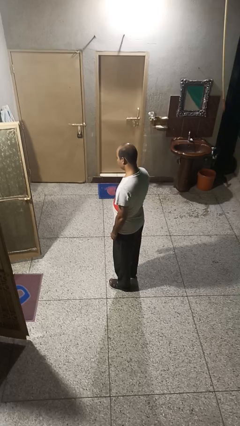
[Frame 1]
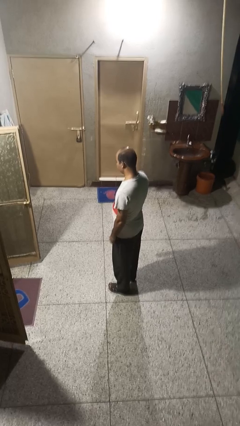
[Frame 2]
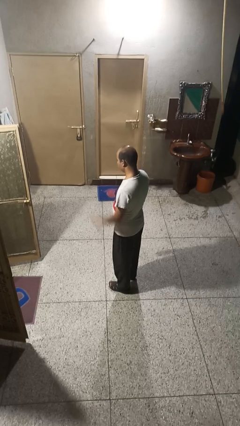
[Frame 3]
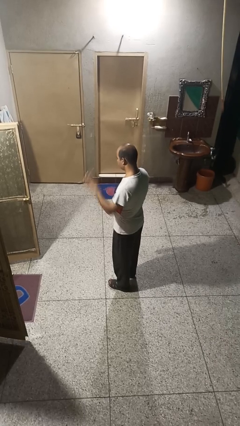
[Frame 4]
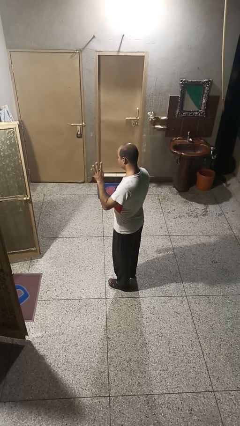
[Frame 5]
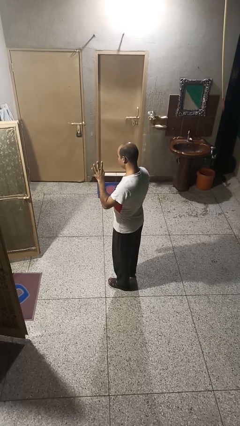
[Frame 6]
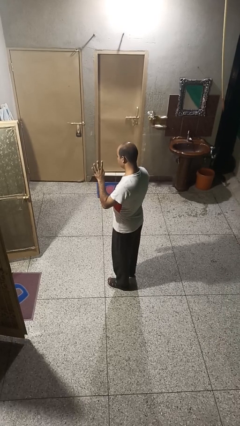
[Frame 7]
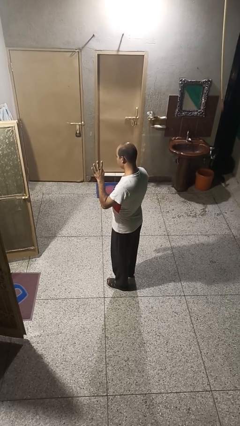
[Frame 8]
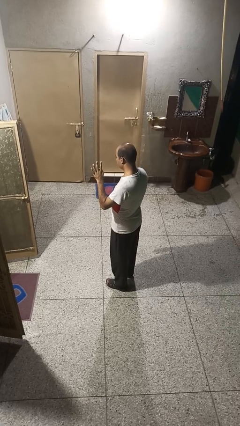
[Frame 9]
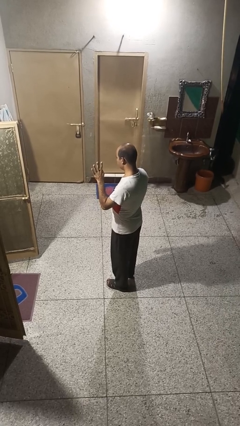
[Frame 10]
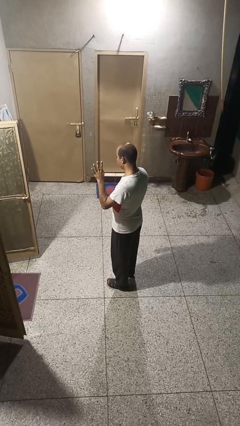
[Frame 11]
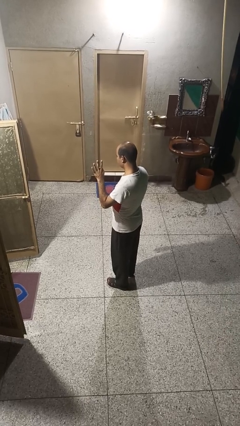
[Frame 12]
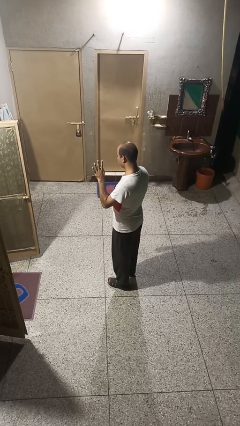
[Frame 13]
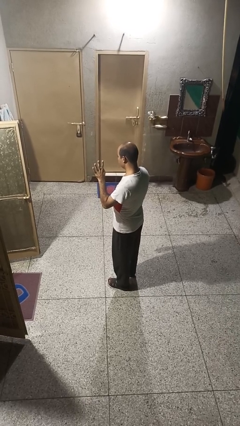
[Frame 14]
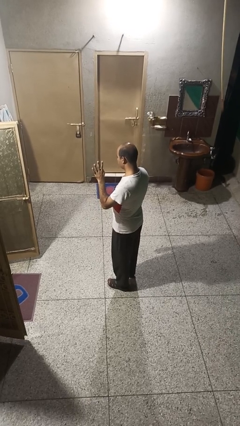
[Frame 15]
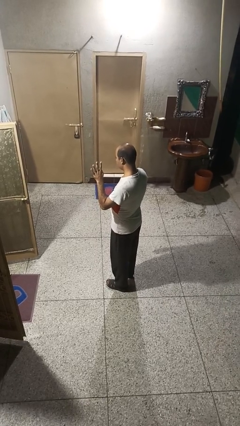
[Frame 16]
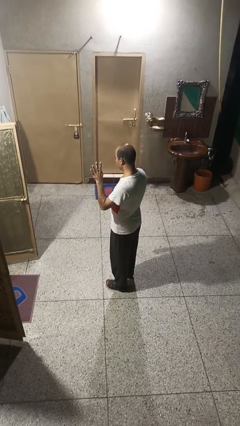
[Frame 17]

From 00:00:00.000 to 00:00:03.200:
person gestures number four

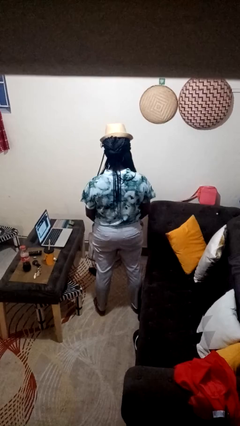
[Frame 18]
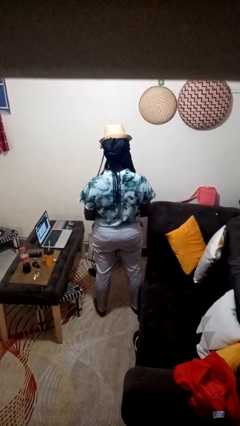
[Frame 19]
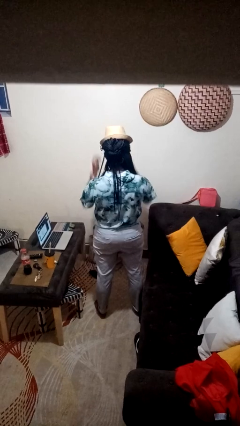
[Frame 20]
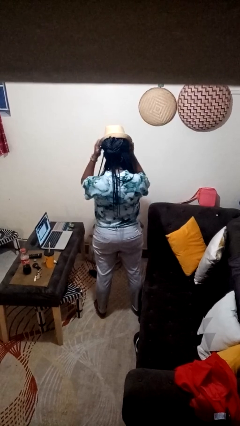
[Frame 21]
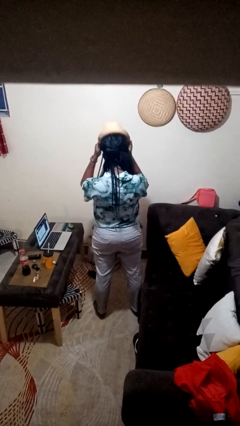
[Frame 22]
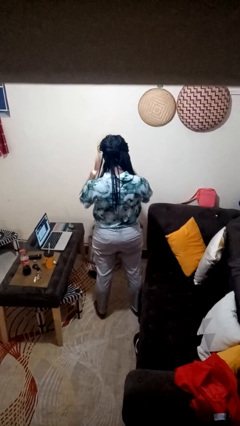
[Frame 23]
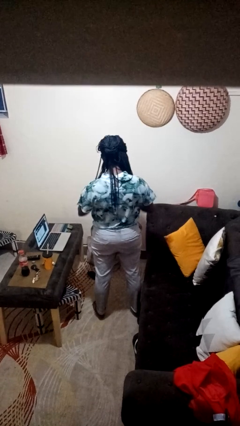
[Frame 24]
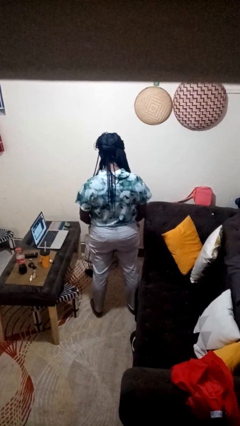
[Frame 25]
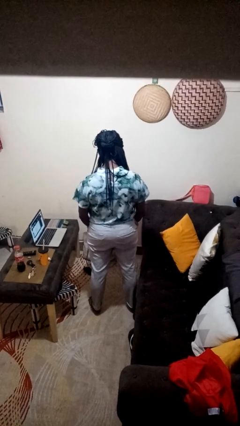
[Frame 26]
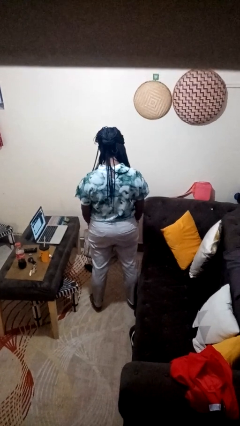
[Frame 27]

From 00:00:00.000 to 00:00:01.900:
person takes off hat

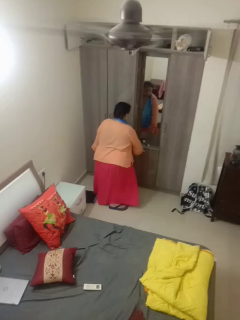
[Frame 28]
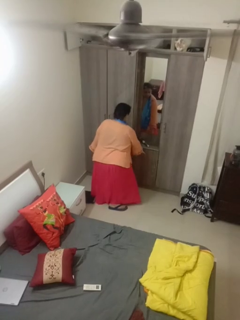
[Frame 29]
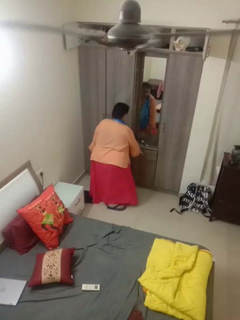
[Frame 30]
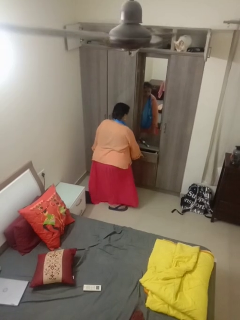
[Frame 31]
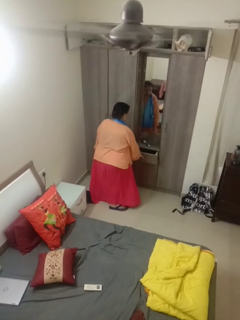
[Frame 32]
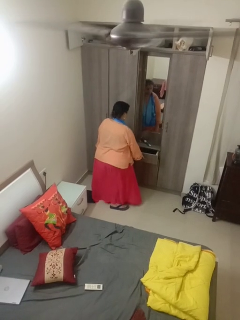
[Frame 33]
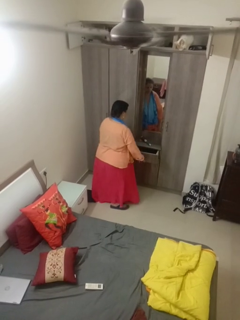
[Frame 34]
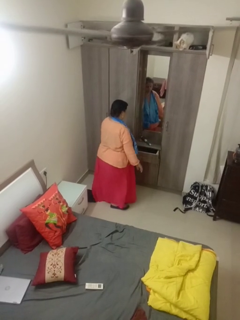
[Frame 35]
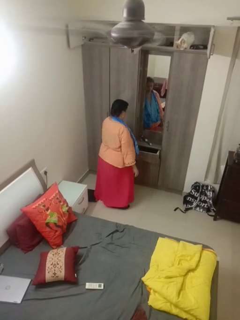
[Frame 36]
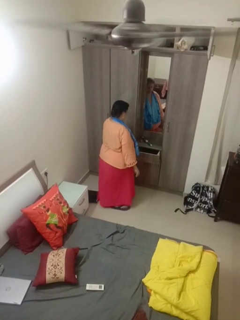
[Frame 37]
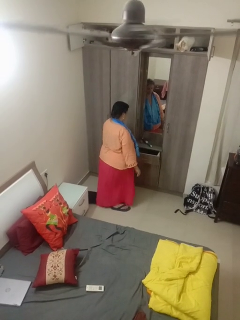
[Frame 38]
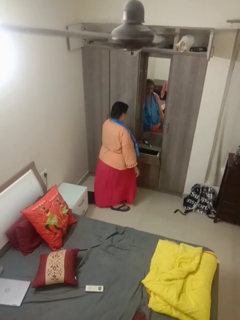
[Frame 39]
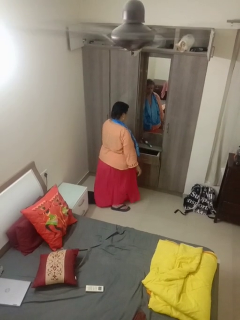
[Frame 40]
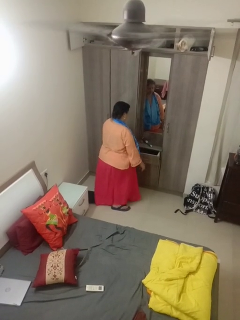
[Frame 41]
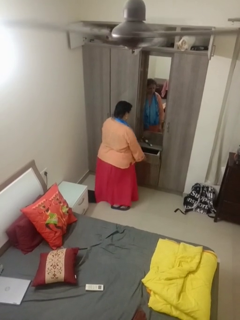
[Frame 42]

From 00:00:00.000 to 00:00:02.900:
person opens dresser drawer

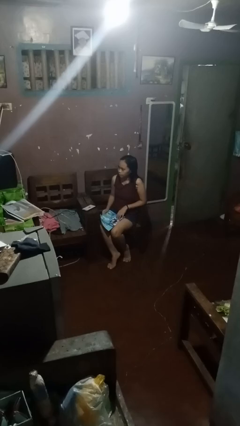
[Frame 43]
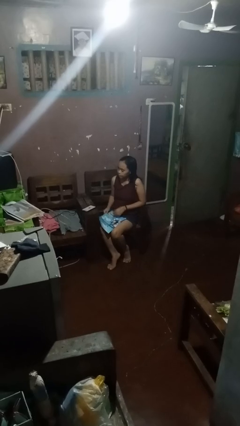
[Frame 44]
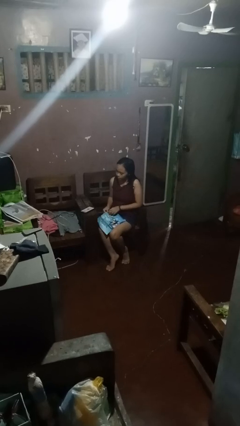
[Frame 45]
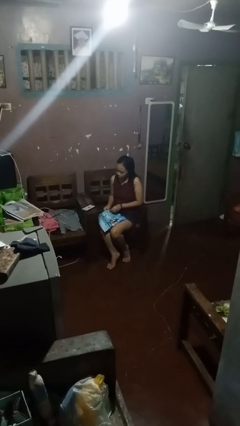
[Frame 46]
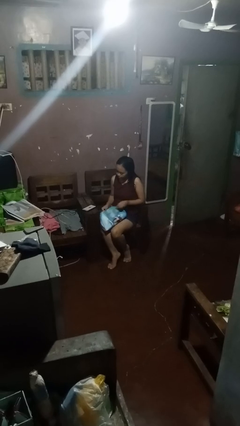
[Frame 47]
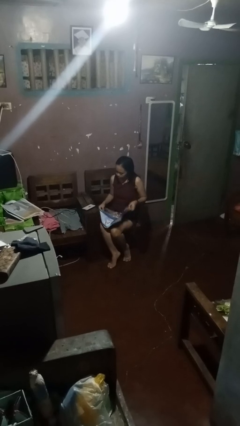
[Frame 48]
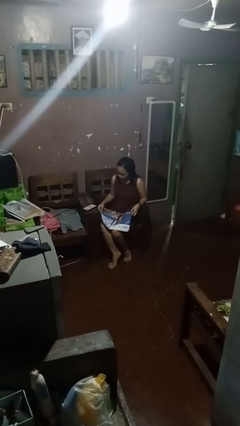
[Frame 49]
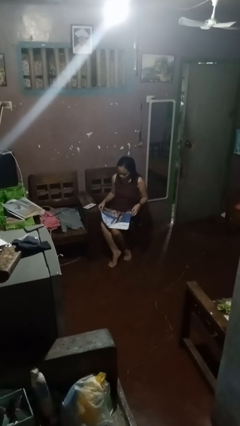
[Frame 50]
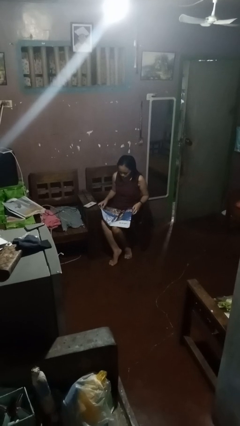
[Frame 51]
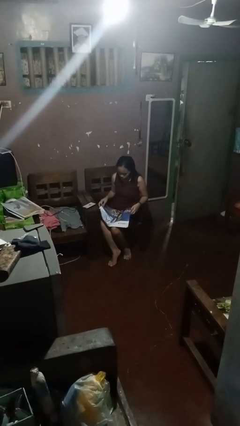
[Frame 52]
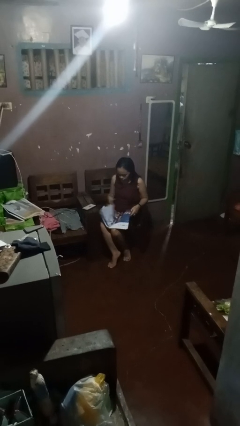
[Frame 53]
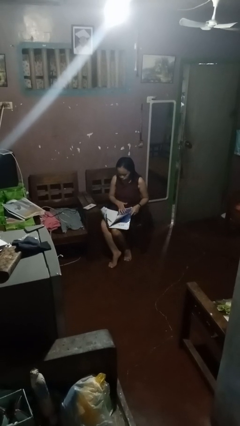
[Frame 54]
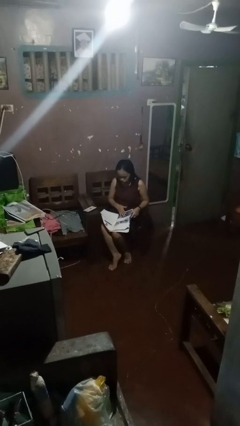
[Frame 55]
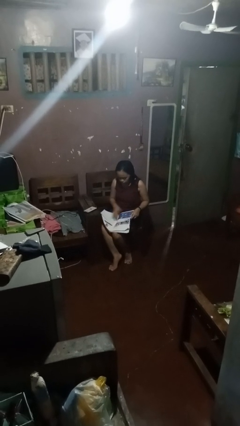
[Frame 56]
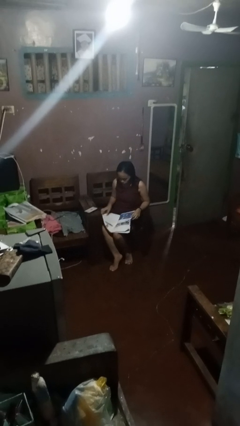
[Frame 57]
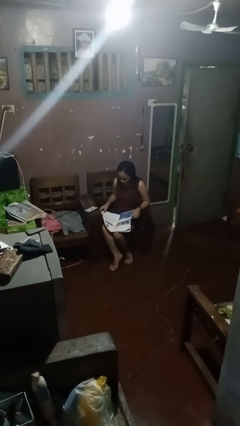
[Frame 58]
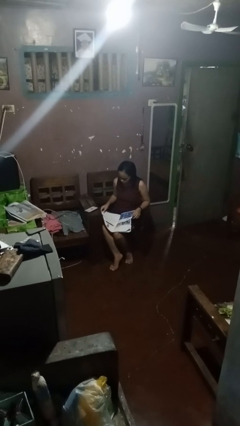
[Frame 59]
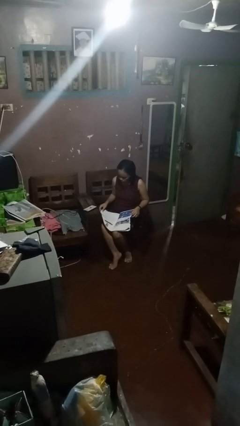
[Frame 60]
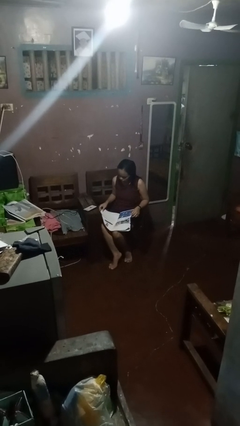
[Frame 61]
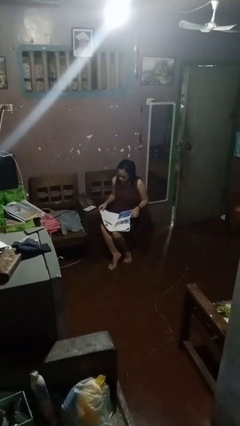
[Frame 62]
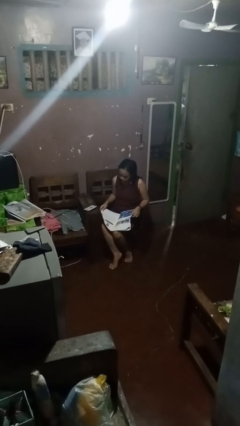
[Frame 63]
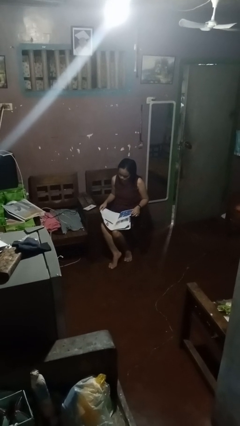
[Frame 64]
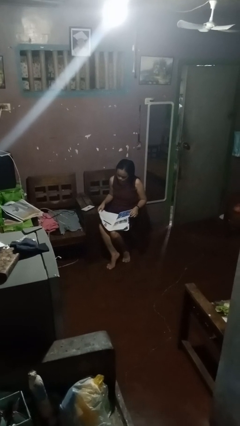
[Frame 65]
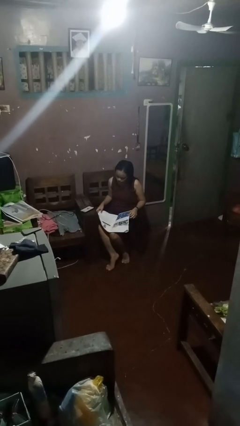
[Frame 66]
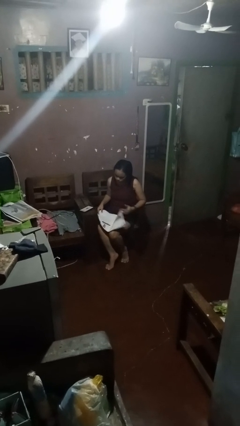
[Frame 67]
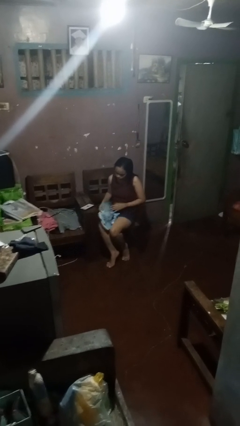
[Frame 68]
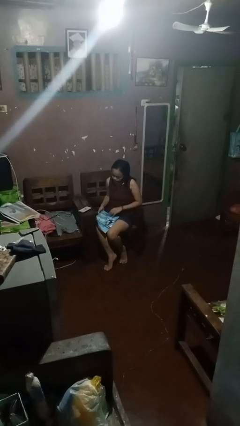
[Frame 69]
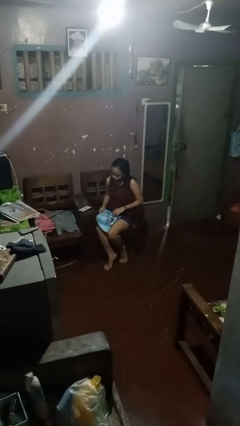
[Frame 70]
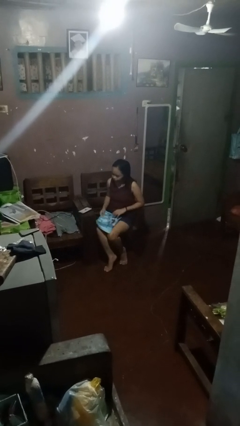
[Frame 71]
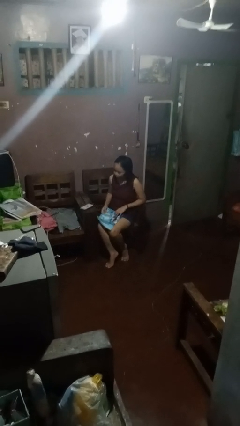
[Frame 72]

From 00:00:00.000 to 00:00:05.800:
person reads magazine

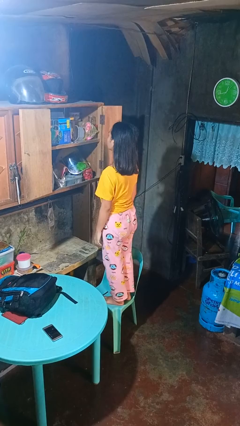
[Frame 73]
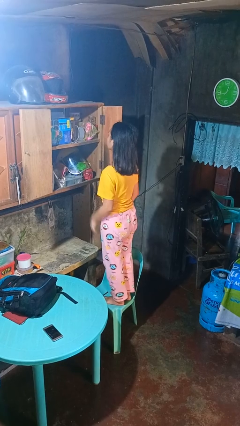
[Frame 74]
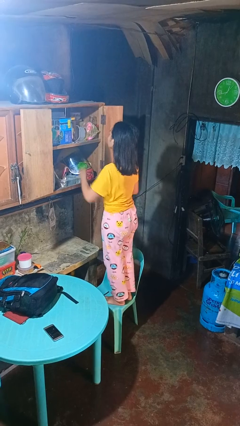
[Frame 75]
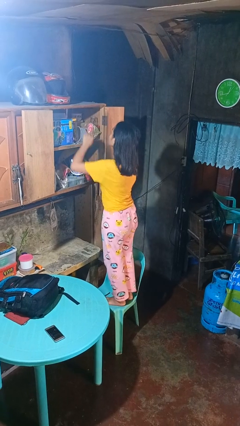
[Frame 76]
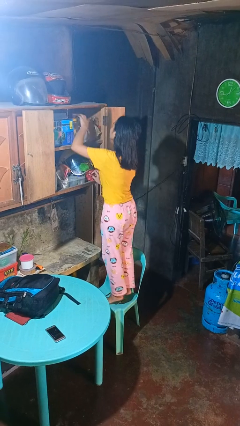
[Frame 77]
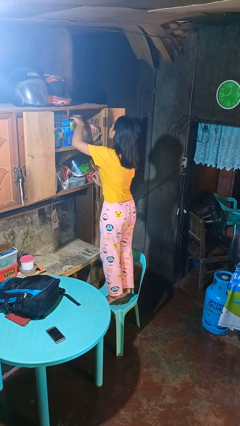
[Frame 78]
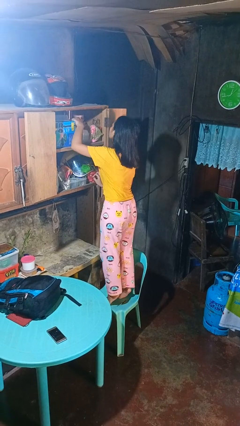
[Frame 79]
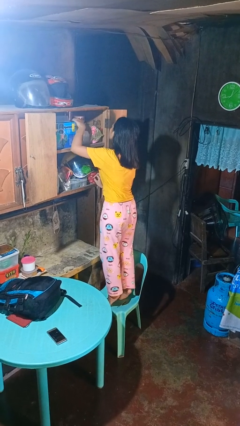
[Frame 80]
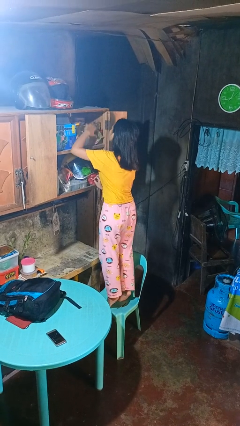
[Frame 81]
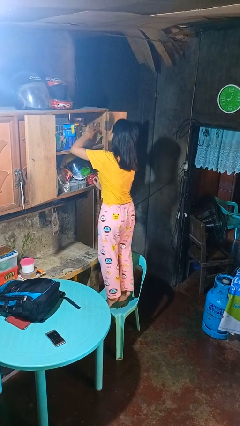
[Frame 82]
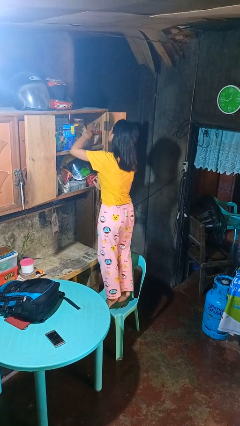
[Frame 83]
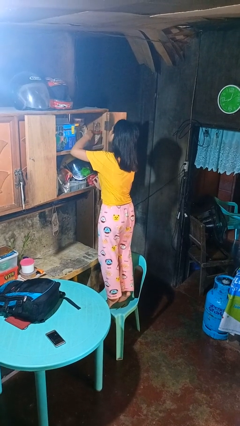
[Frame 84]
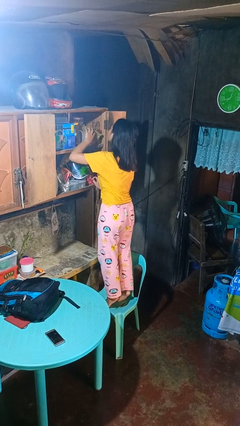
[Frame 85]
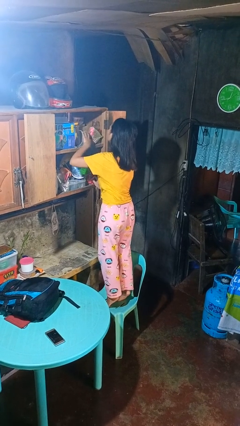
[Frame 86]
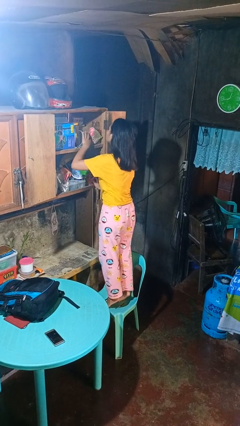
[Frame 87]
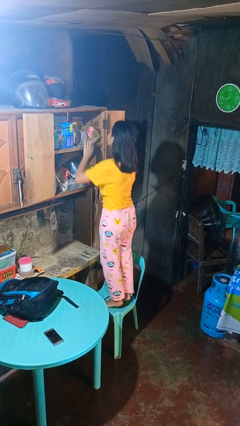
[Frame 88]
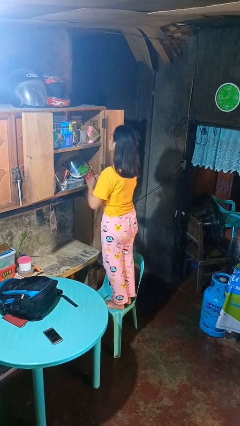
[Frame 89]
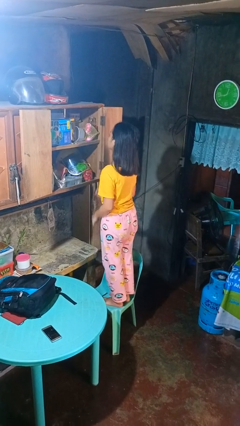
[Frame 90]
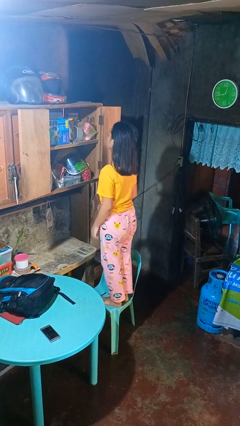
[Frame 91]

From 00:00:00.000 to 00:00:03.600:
person searches in cabinet

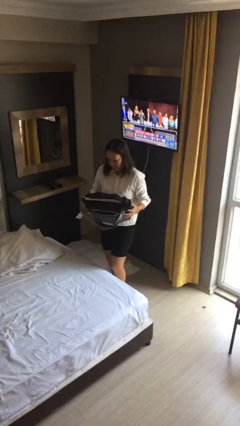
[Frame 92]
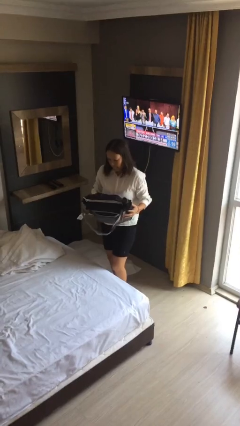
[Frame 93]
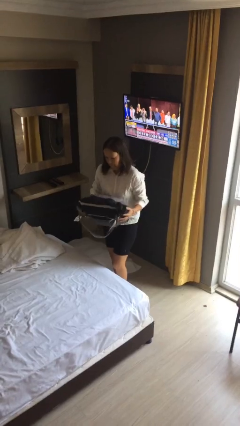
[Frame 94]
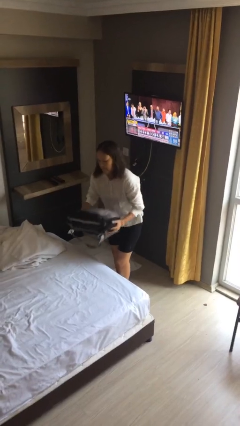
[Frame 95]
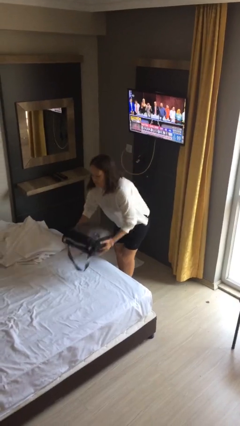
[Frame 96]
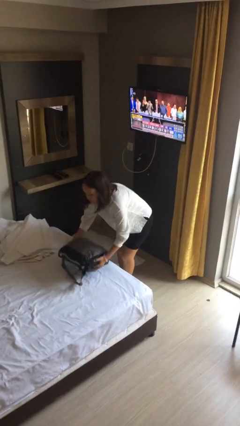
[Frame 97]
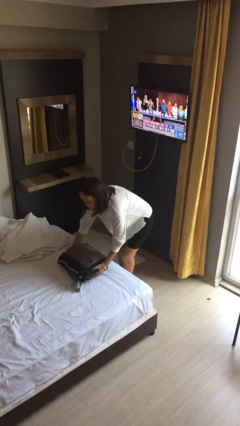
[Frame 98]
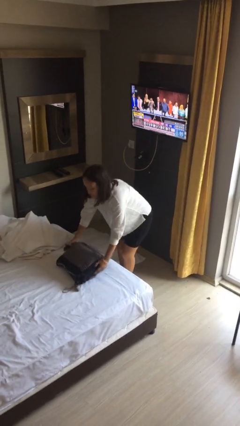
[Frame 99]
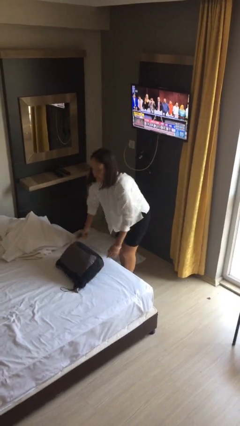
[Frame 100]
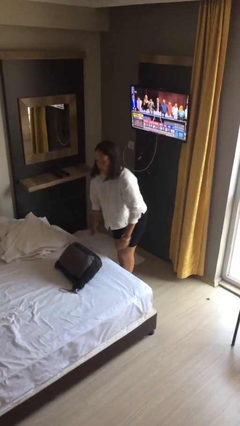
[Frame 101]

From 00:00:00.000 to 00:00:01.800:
person puts down object on bed
